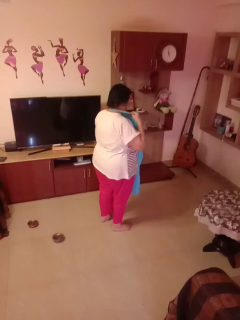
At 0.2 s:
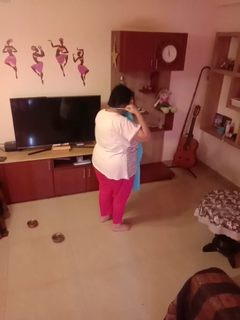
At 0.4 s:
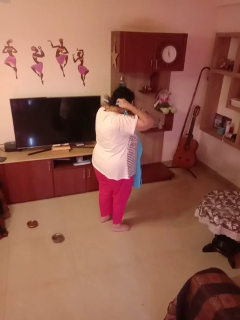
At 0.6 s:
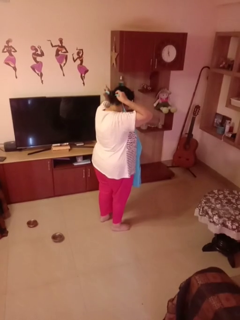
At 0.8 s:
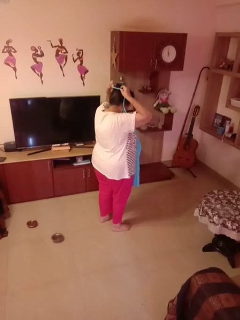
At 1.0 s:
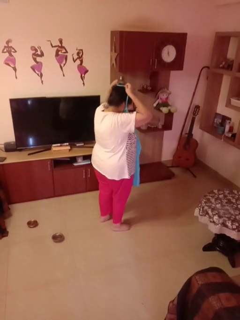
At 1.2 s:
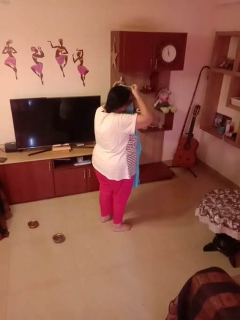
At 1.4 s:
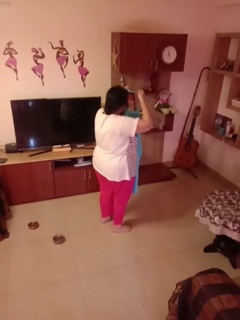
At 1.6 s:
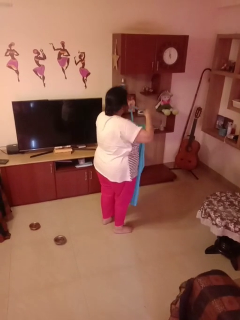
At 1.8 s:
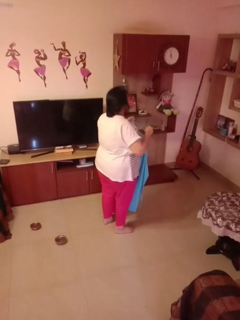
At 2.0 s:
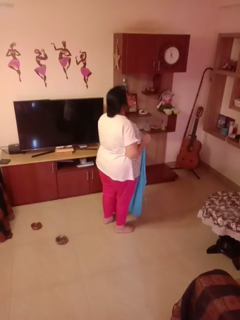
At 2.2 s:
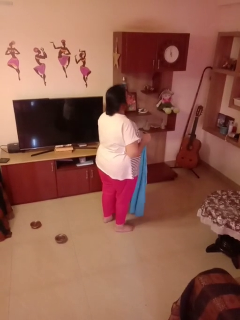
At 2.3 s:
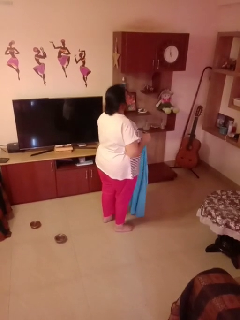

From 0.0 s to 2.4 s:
person takes off apron

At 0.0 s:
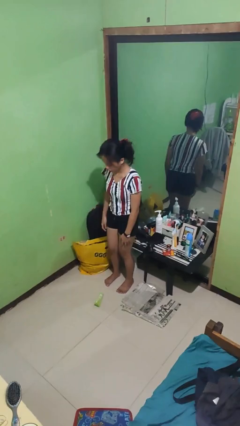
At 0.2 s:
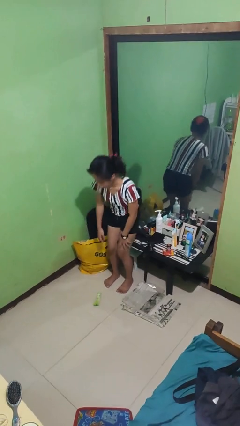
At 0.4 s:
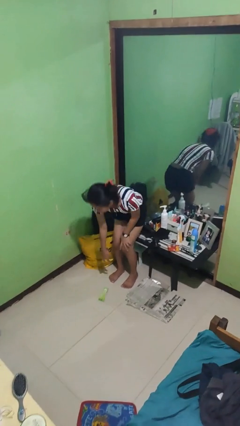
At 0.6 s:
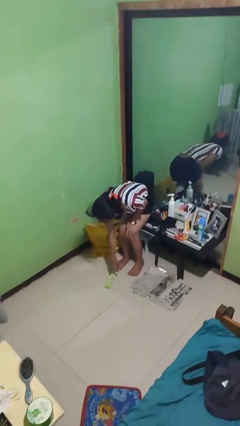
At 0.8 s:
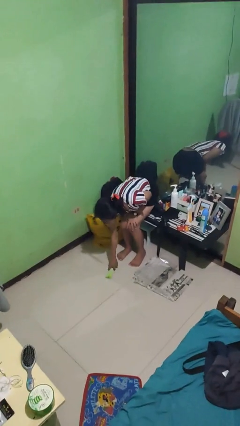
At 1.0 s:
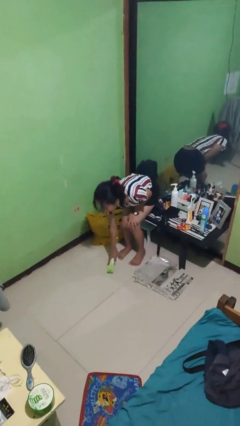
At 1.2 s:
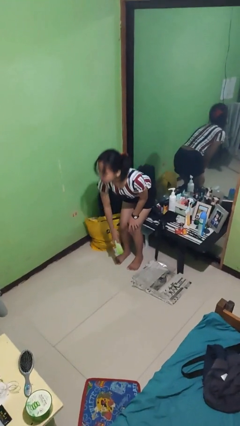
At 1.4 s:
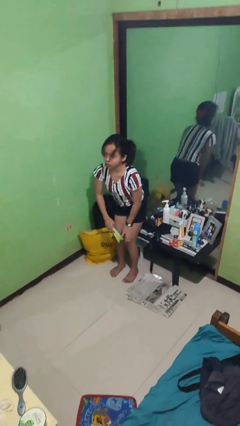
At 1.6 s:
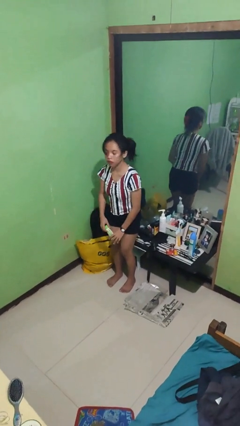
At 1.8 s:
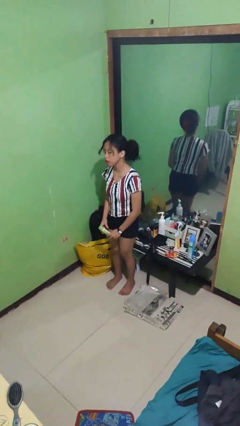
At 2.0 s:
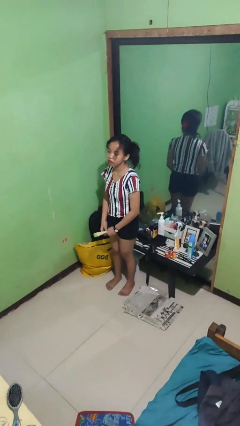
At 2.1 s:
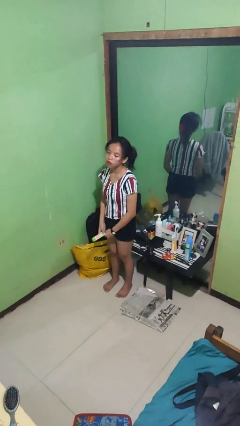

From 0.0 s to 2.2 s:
person picks up object from floor

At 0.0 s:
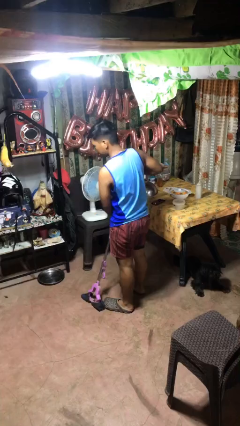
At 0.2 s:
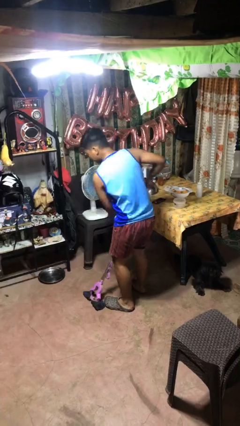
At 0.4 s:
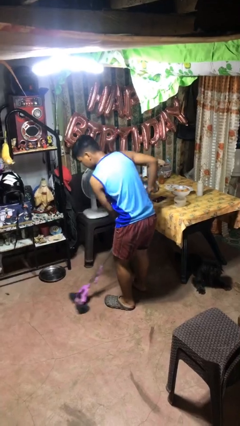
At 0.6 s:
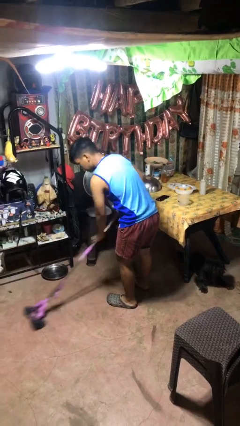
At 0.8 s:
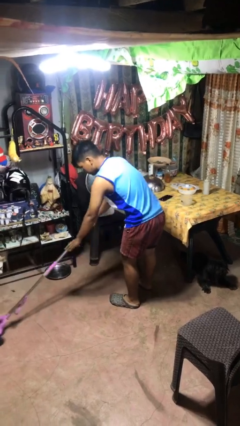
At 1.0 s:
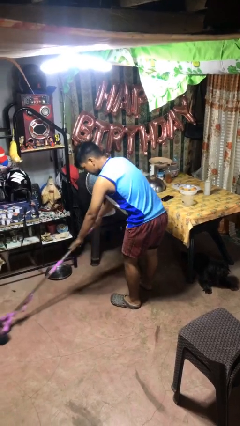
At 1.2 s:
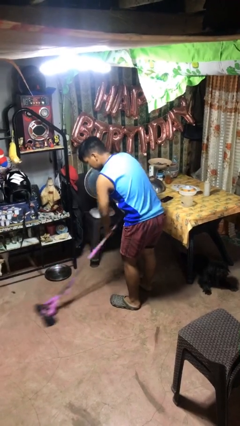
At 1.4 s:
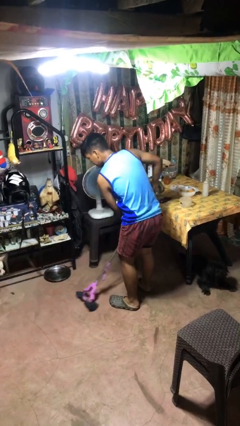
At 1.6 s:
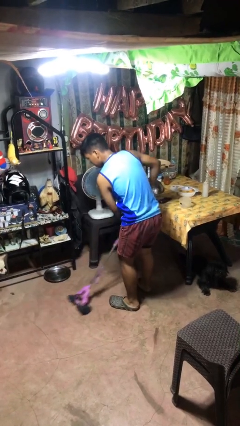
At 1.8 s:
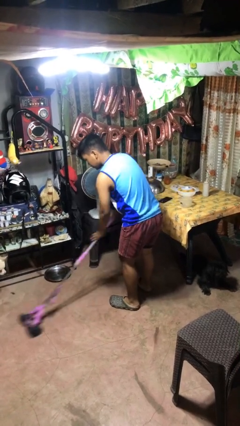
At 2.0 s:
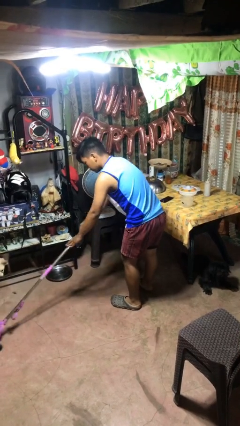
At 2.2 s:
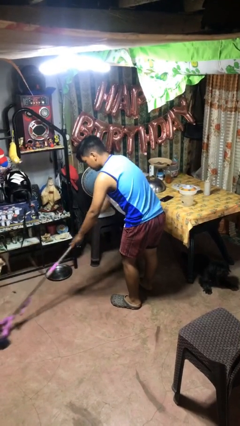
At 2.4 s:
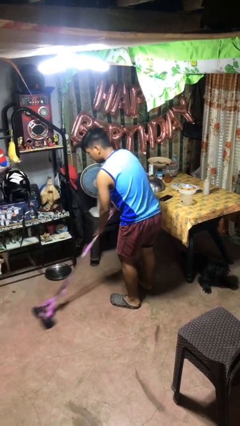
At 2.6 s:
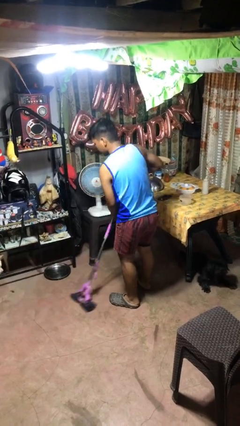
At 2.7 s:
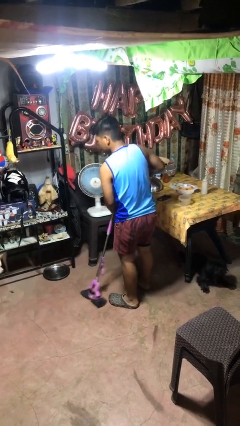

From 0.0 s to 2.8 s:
person mops

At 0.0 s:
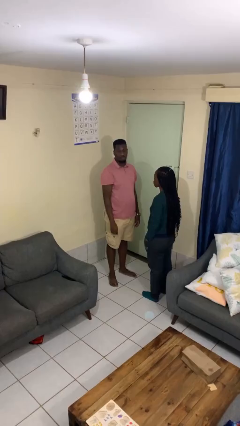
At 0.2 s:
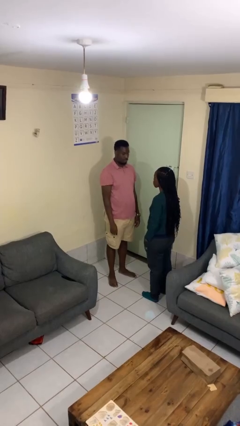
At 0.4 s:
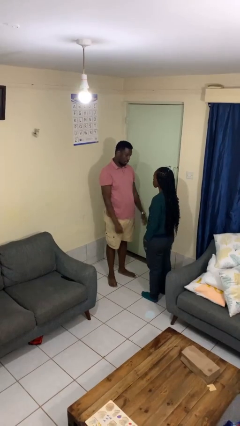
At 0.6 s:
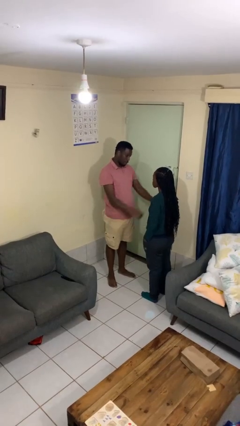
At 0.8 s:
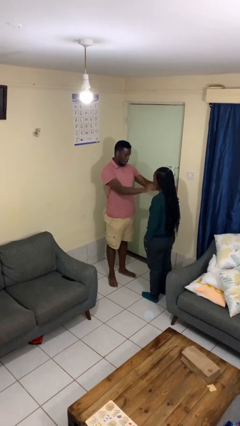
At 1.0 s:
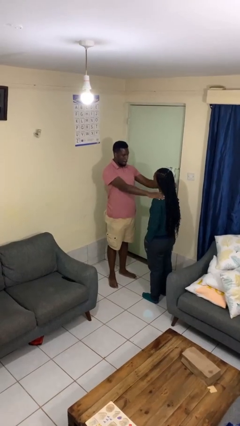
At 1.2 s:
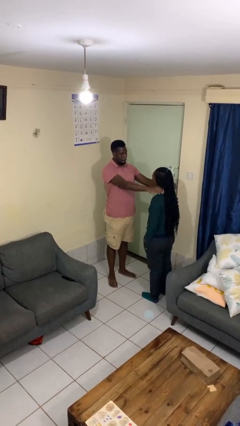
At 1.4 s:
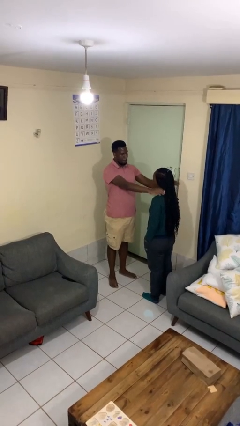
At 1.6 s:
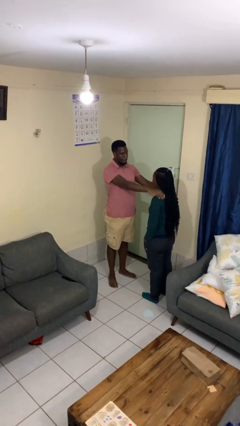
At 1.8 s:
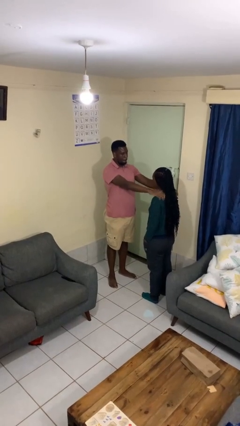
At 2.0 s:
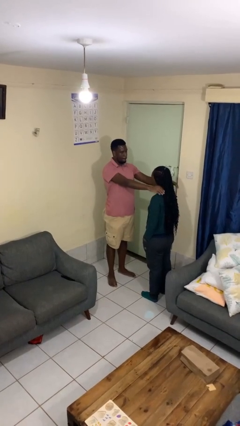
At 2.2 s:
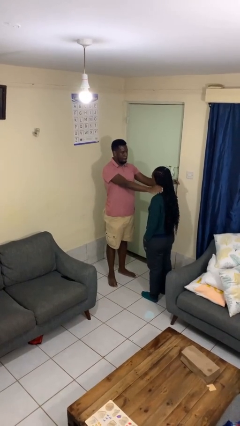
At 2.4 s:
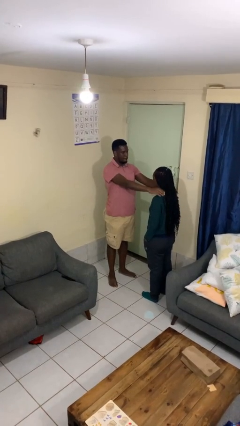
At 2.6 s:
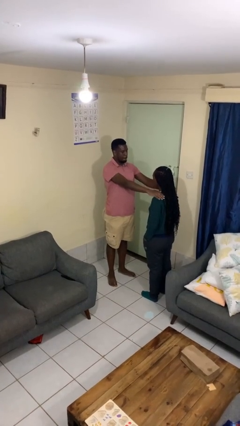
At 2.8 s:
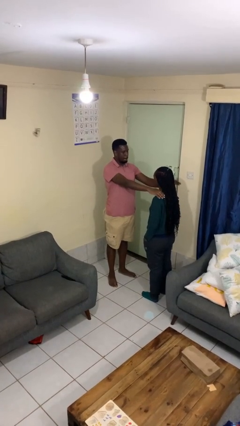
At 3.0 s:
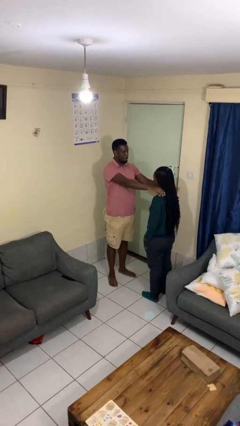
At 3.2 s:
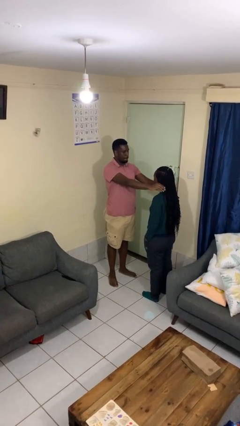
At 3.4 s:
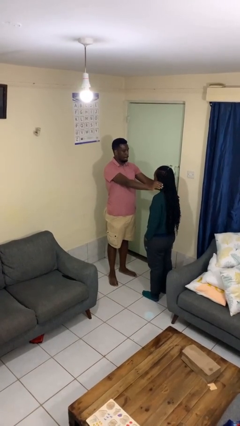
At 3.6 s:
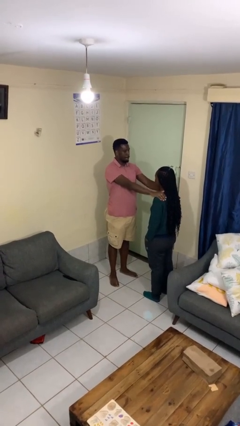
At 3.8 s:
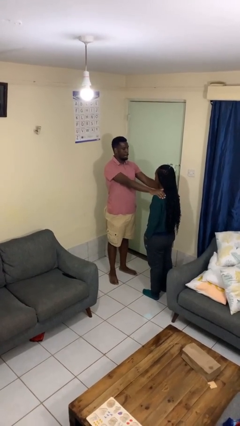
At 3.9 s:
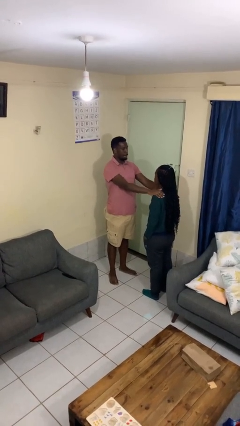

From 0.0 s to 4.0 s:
person pounds shoulders of person

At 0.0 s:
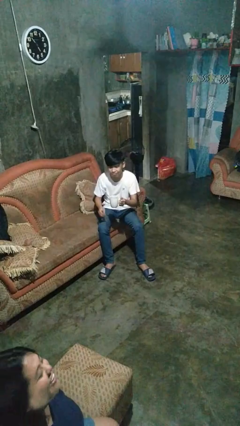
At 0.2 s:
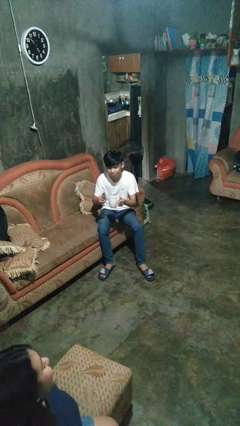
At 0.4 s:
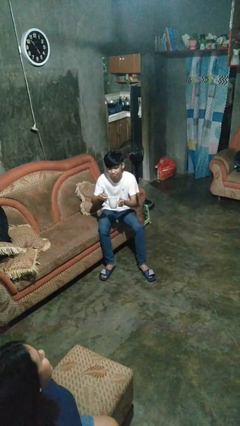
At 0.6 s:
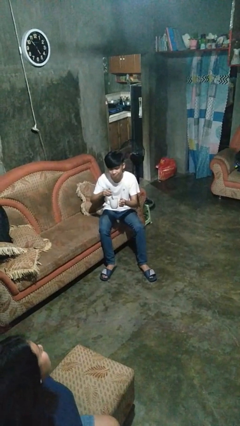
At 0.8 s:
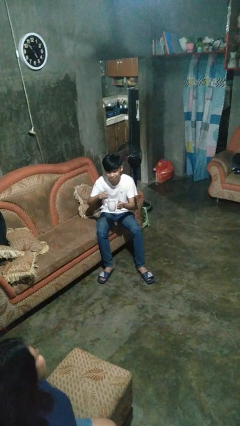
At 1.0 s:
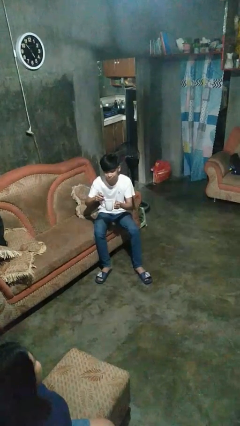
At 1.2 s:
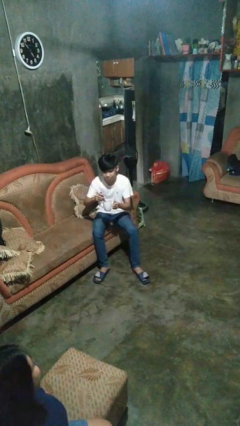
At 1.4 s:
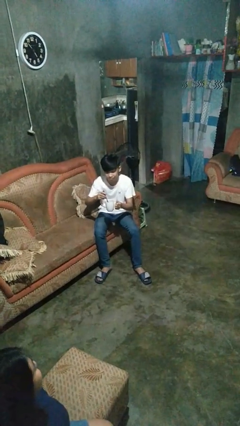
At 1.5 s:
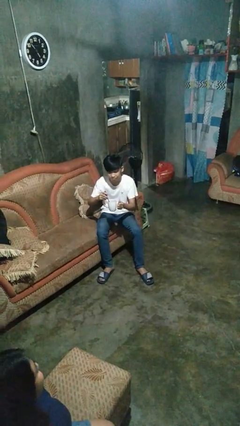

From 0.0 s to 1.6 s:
person stirs mug

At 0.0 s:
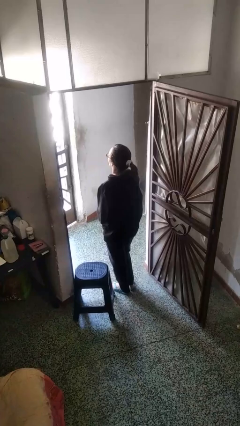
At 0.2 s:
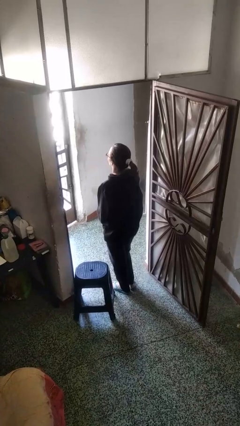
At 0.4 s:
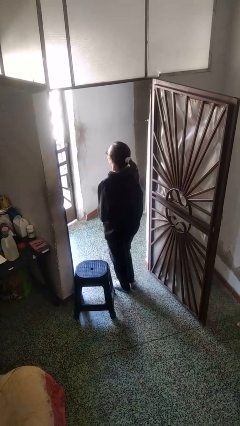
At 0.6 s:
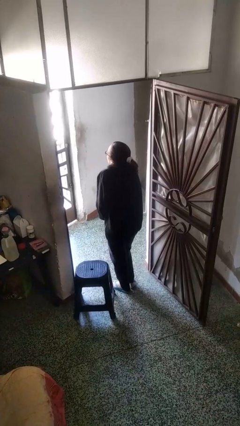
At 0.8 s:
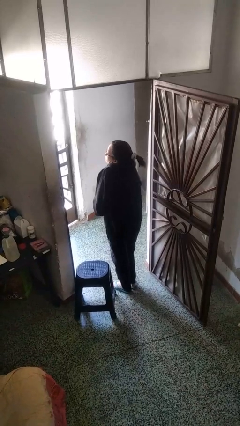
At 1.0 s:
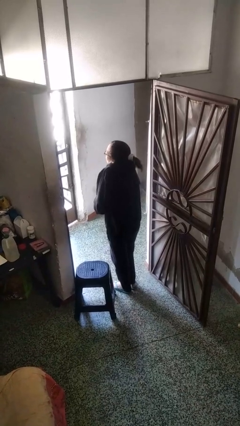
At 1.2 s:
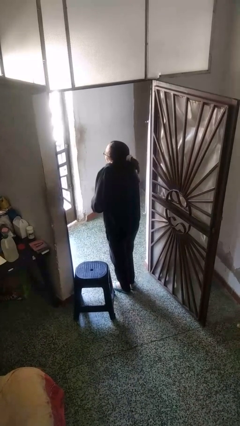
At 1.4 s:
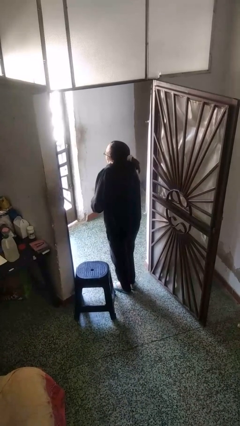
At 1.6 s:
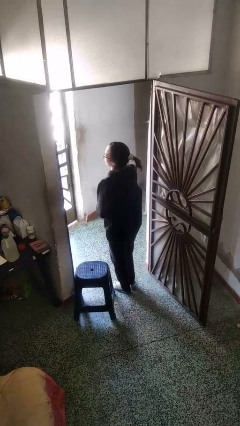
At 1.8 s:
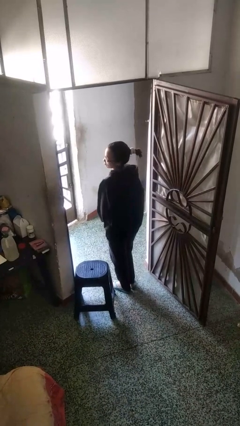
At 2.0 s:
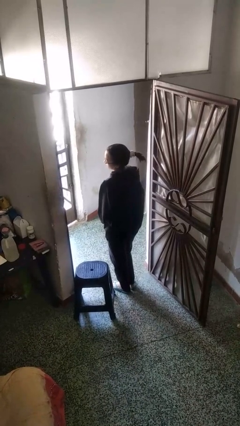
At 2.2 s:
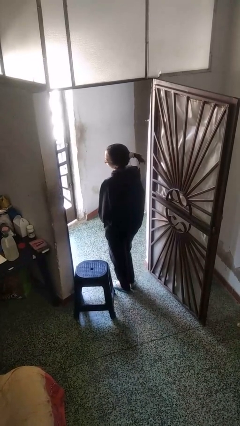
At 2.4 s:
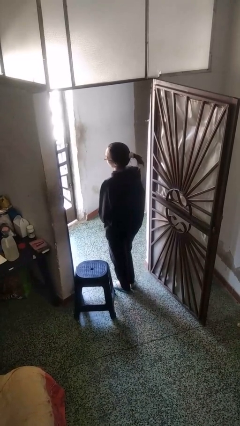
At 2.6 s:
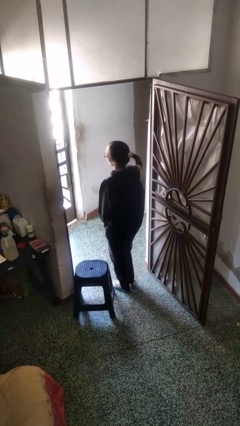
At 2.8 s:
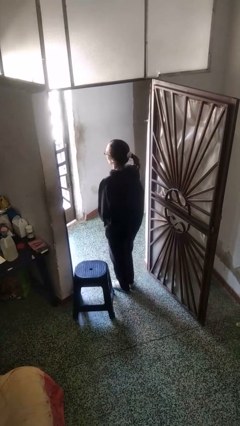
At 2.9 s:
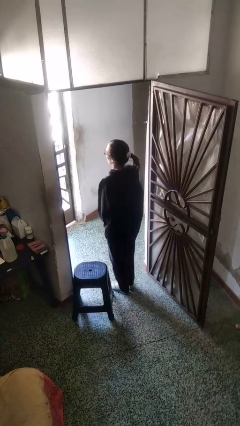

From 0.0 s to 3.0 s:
person shrugs

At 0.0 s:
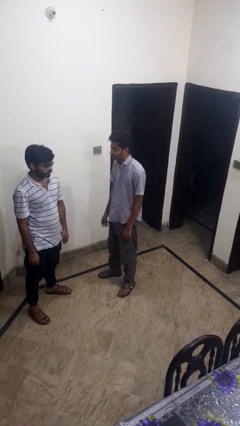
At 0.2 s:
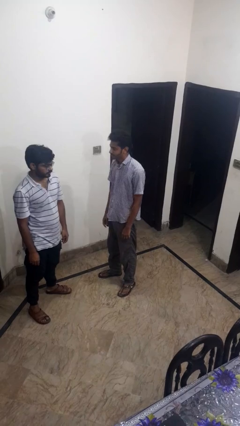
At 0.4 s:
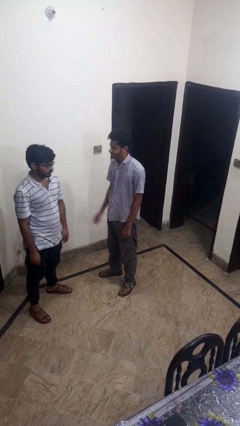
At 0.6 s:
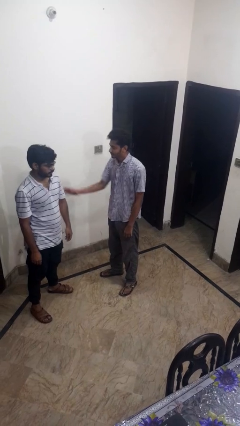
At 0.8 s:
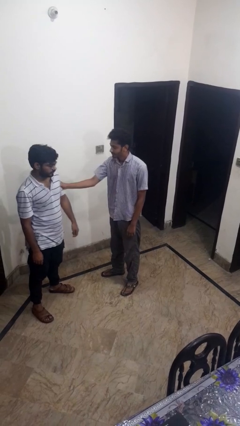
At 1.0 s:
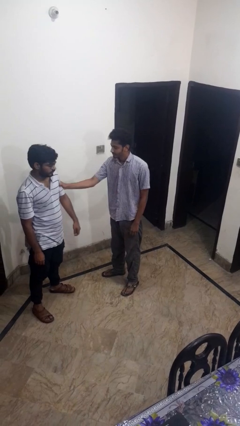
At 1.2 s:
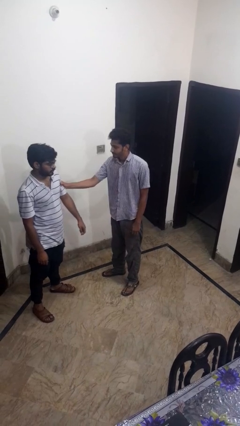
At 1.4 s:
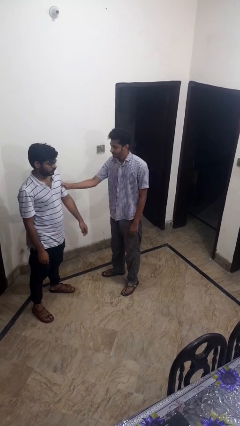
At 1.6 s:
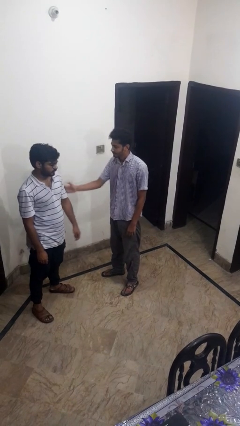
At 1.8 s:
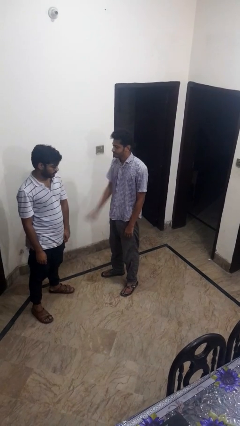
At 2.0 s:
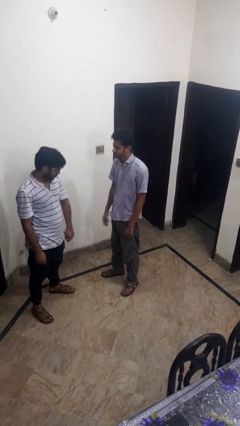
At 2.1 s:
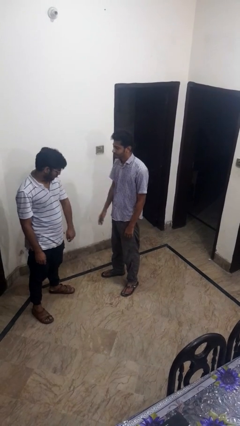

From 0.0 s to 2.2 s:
person grabs person by bicep
